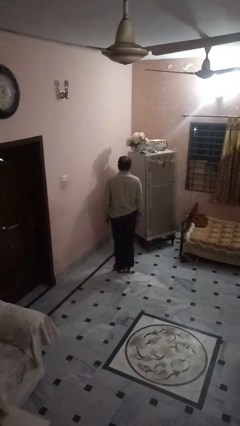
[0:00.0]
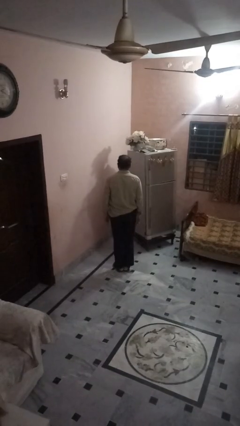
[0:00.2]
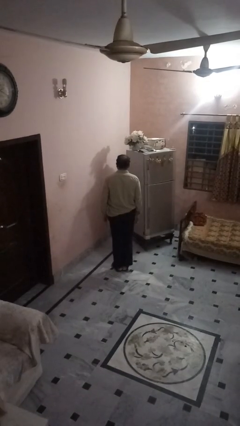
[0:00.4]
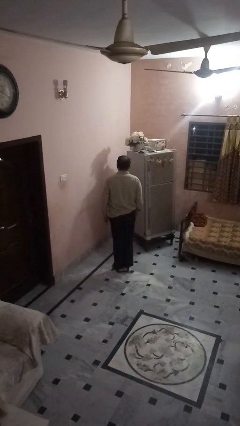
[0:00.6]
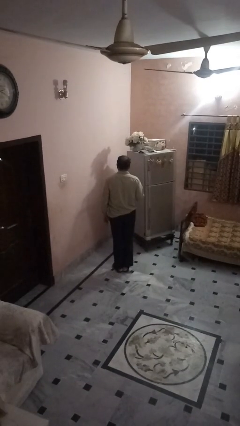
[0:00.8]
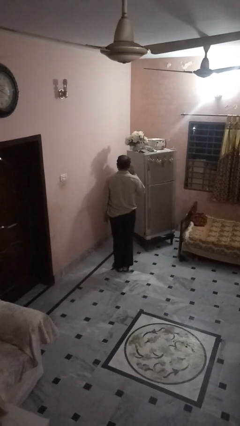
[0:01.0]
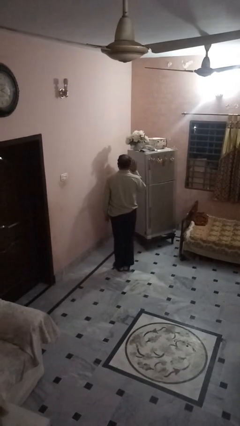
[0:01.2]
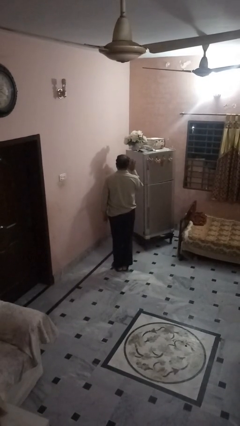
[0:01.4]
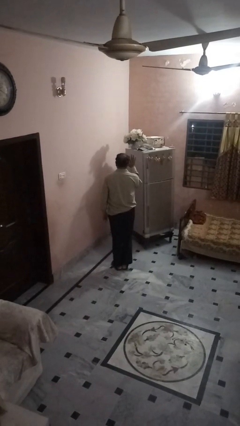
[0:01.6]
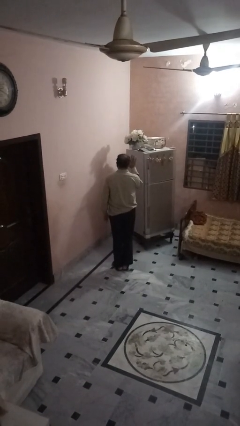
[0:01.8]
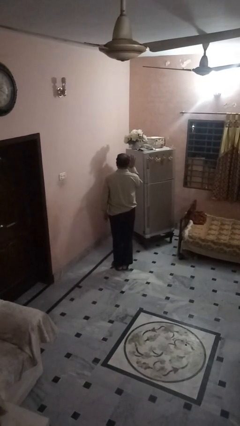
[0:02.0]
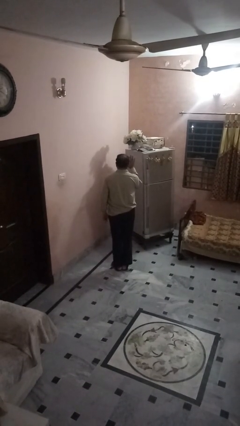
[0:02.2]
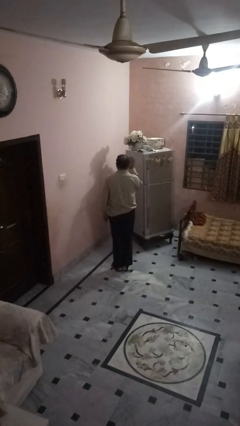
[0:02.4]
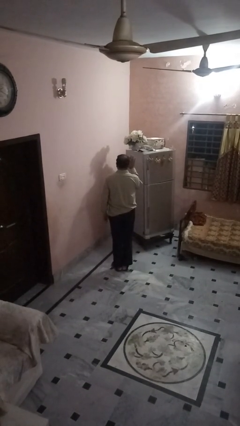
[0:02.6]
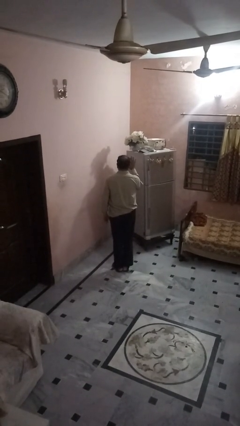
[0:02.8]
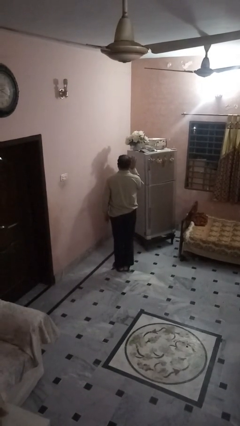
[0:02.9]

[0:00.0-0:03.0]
person gestures number five

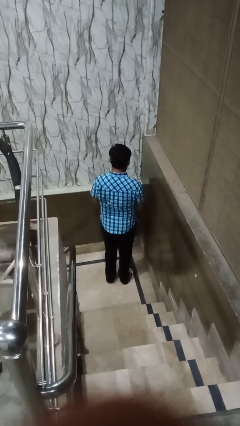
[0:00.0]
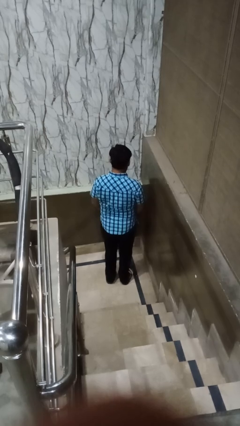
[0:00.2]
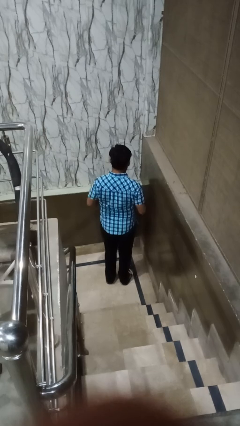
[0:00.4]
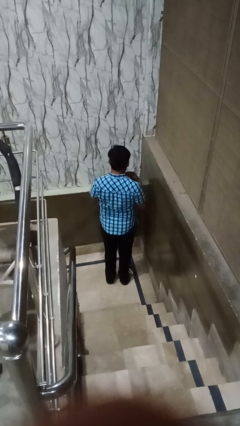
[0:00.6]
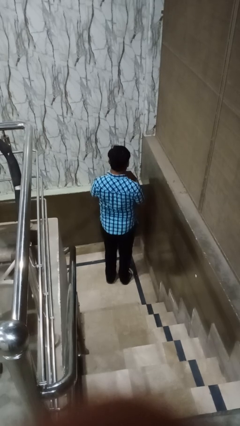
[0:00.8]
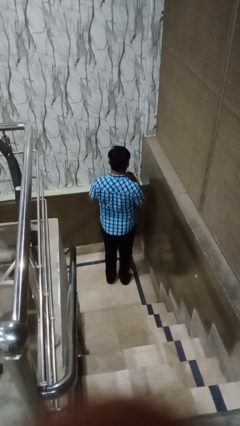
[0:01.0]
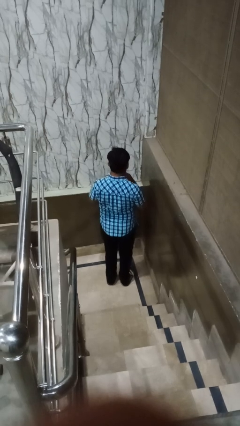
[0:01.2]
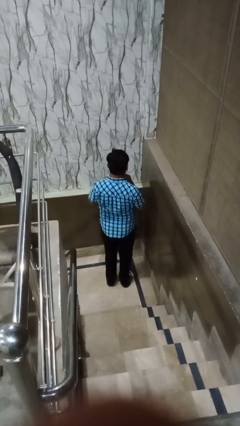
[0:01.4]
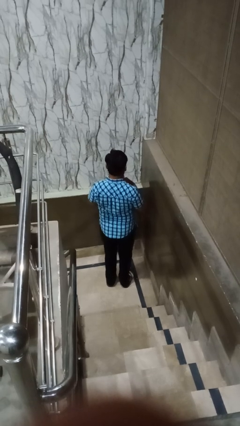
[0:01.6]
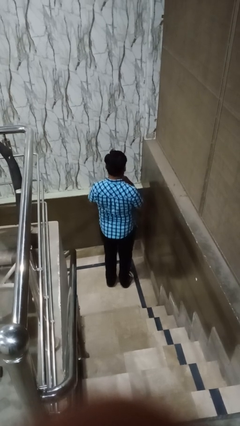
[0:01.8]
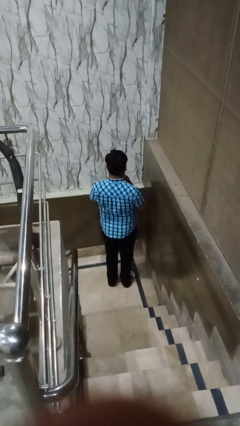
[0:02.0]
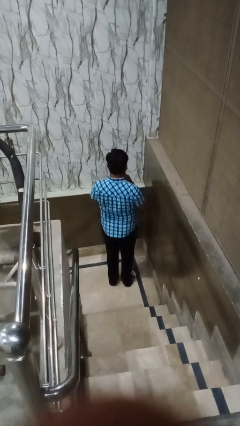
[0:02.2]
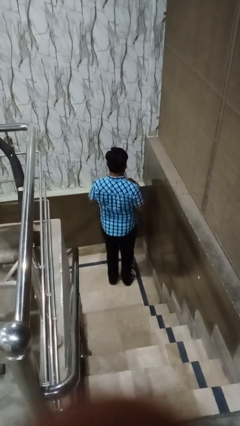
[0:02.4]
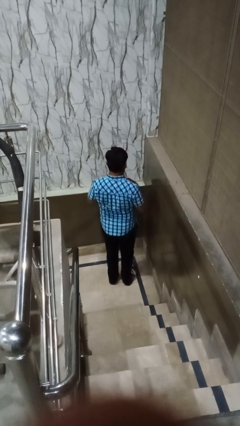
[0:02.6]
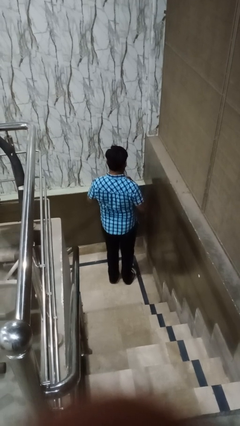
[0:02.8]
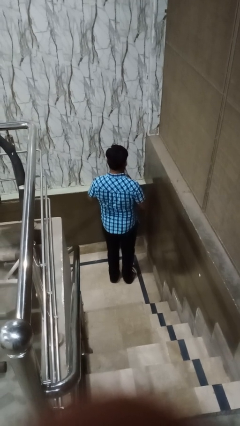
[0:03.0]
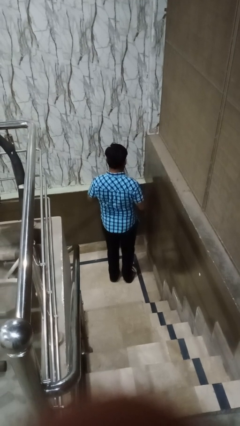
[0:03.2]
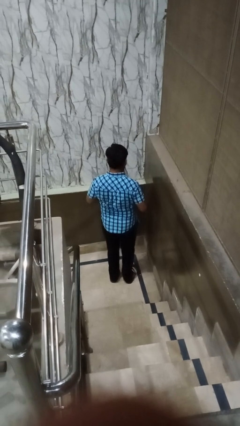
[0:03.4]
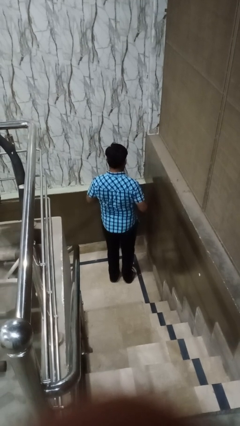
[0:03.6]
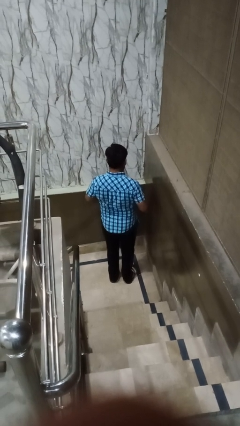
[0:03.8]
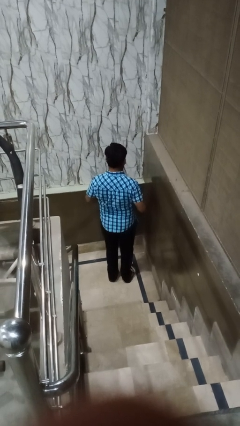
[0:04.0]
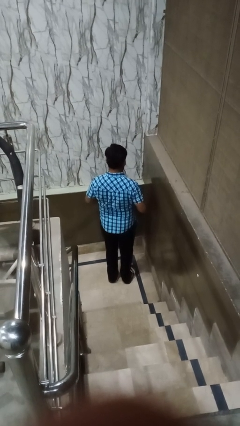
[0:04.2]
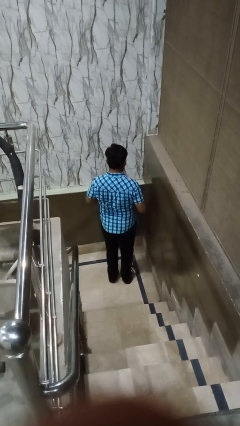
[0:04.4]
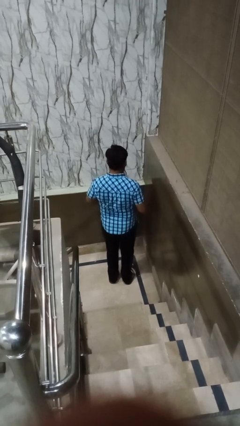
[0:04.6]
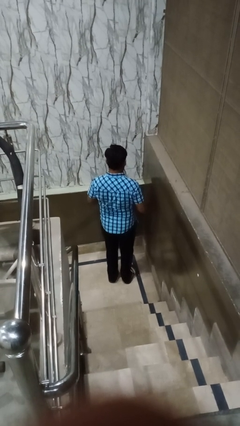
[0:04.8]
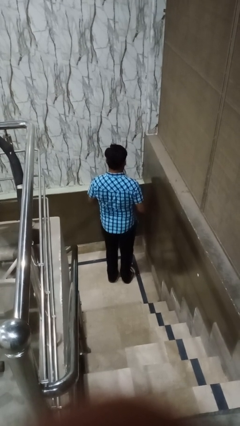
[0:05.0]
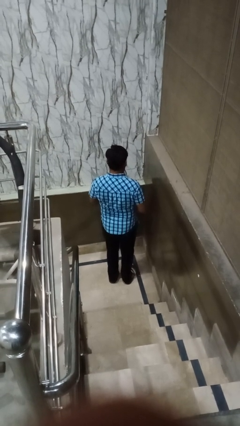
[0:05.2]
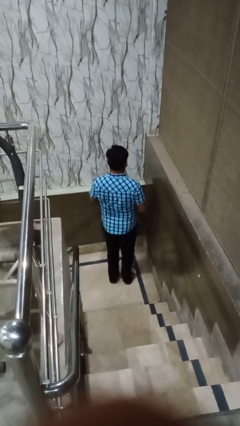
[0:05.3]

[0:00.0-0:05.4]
person buttons shirt

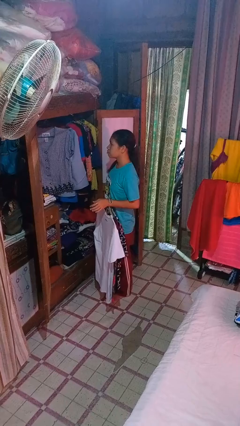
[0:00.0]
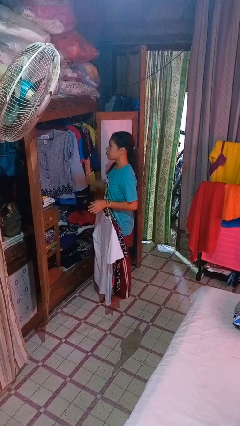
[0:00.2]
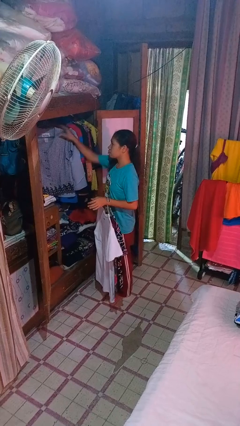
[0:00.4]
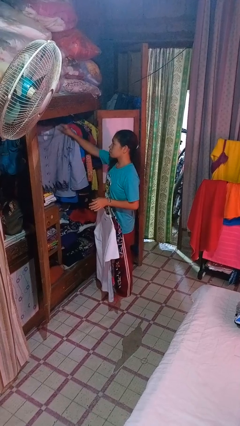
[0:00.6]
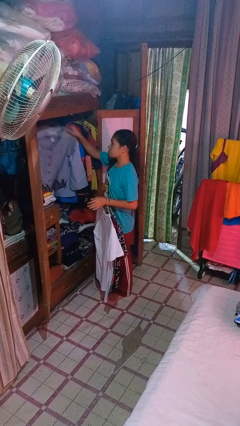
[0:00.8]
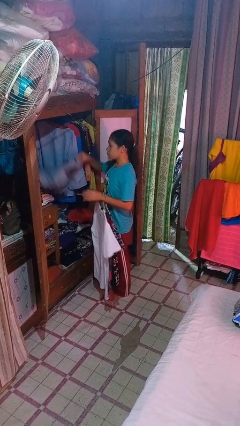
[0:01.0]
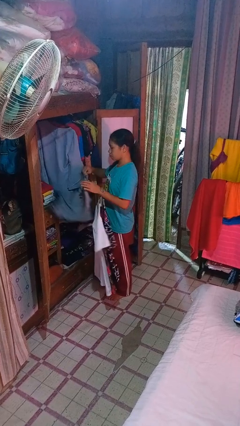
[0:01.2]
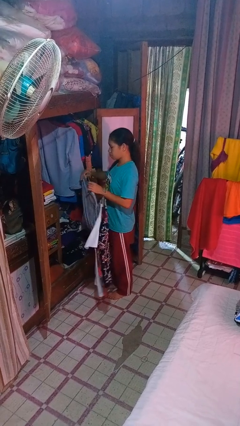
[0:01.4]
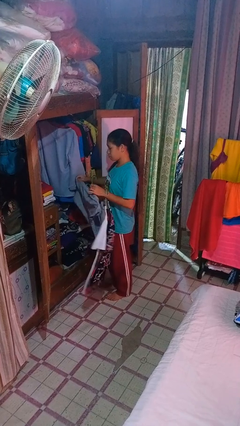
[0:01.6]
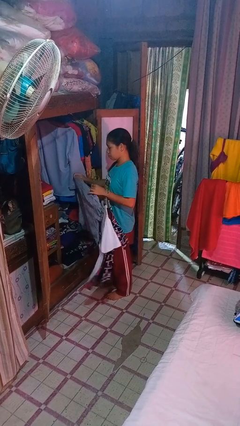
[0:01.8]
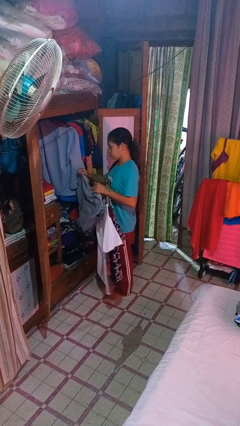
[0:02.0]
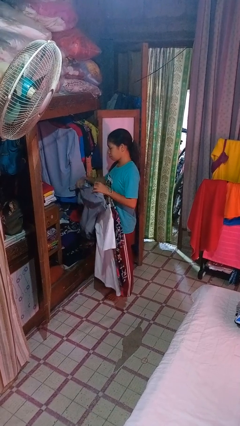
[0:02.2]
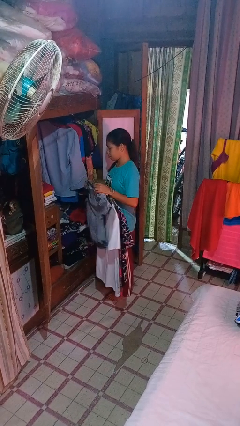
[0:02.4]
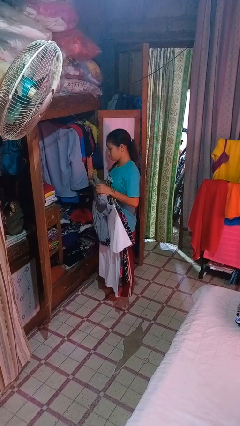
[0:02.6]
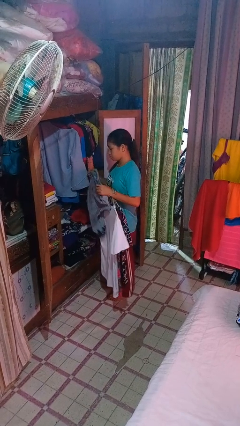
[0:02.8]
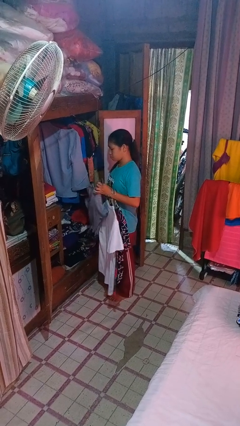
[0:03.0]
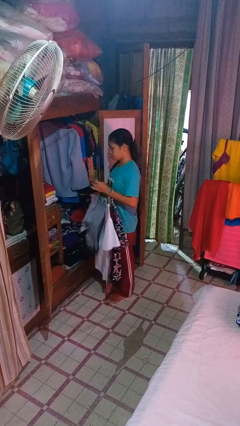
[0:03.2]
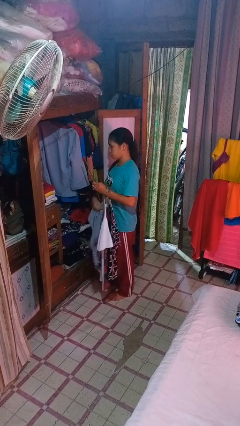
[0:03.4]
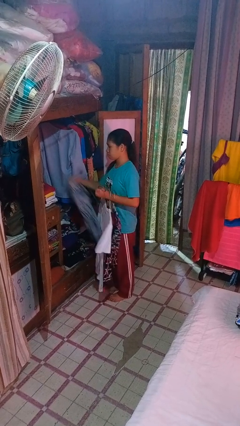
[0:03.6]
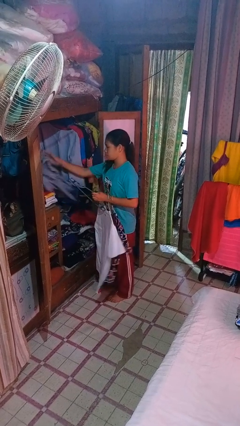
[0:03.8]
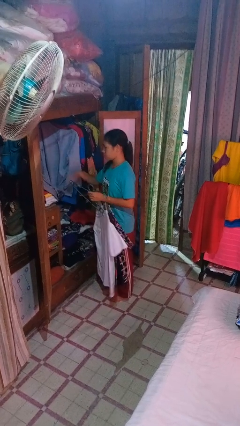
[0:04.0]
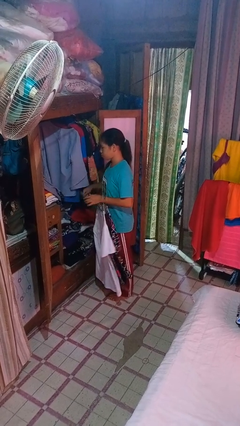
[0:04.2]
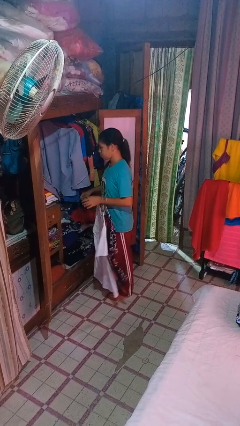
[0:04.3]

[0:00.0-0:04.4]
person takes clothes from closet

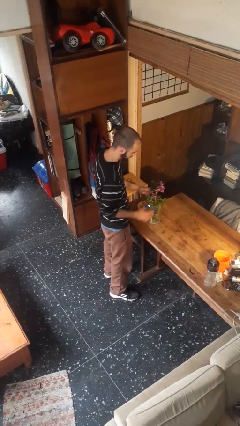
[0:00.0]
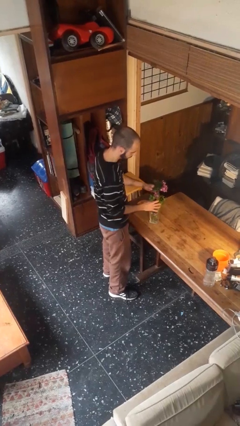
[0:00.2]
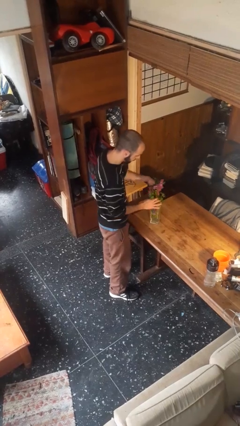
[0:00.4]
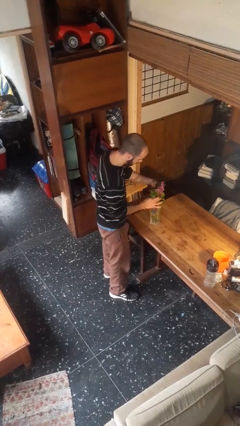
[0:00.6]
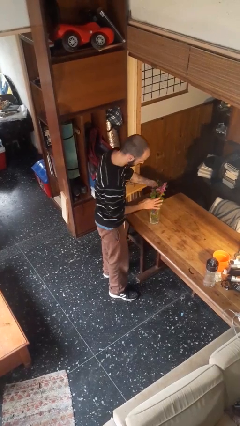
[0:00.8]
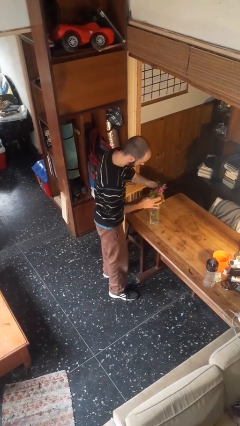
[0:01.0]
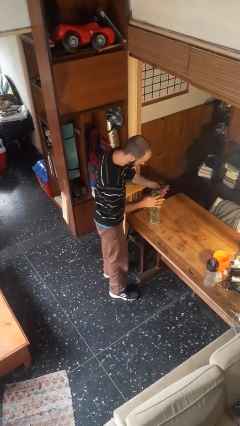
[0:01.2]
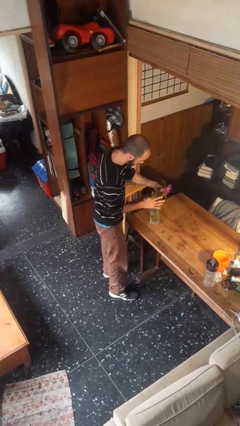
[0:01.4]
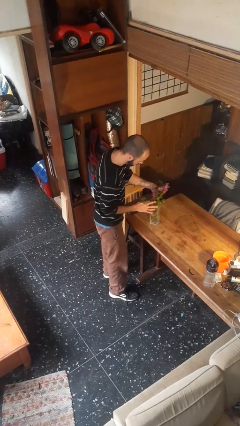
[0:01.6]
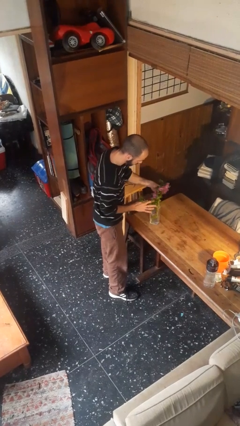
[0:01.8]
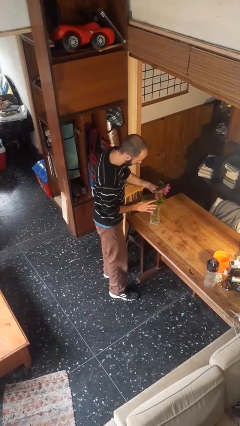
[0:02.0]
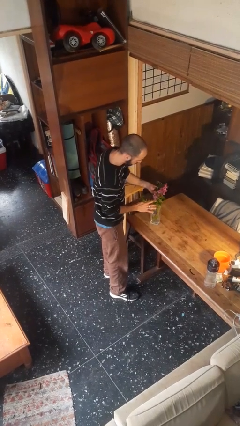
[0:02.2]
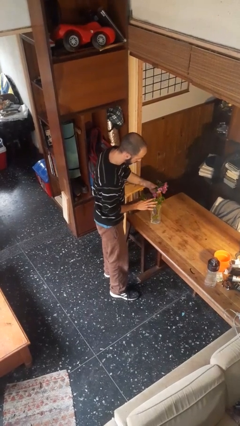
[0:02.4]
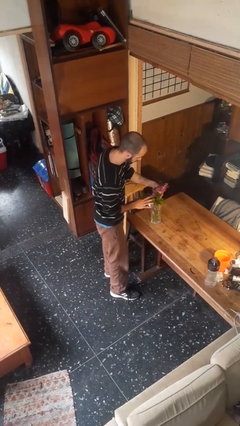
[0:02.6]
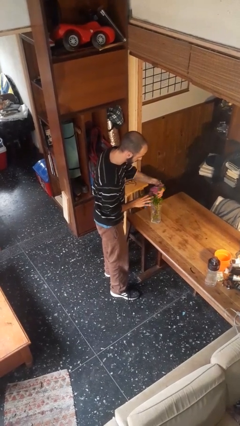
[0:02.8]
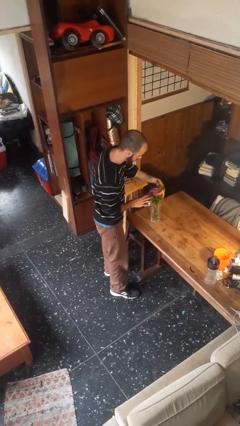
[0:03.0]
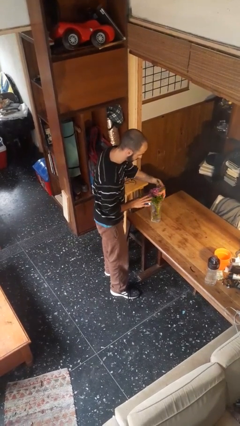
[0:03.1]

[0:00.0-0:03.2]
person arranges flowers in vase

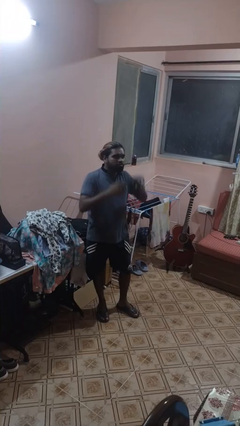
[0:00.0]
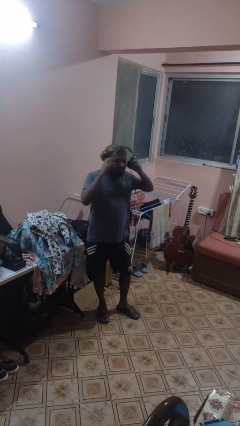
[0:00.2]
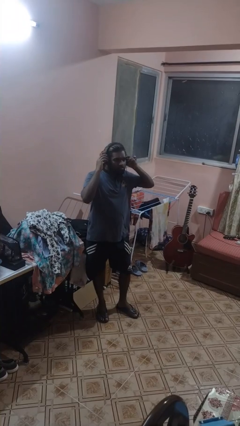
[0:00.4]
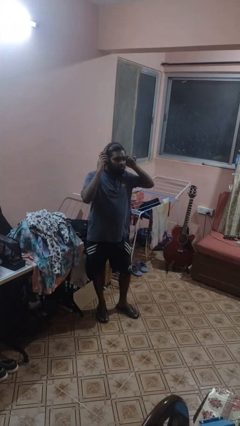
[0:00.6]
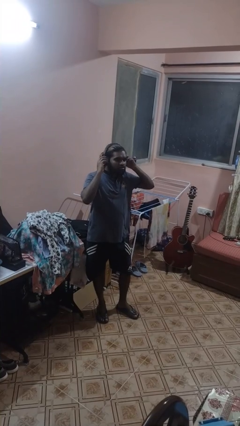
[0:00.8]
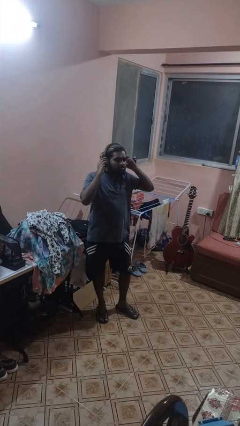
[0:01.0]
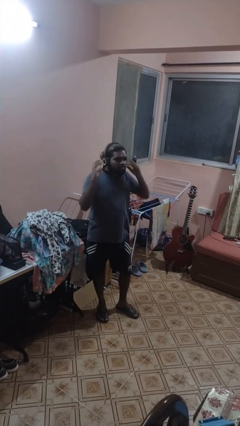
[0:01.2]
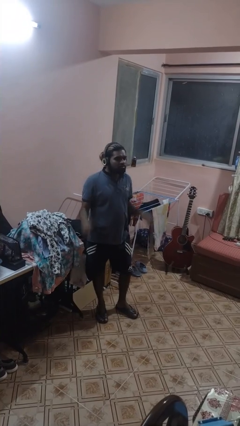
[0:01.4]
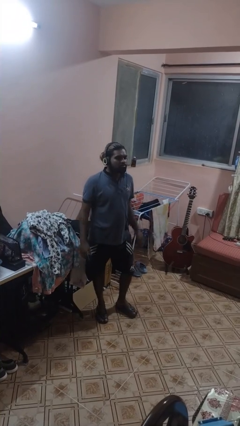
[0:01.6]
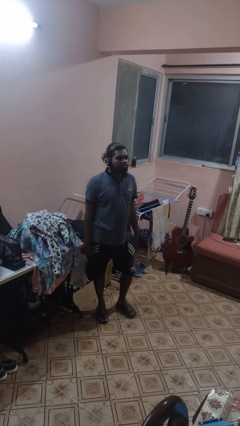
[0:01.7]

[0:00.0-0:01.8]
person puts on headphones
